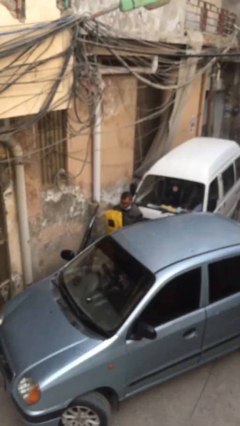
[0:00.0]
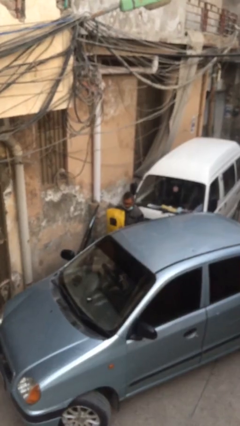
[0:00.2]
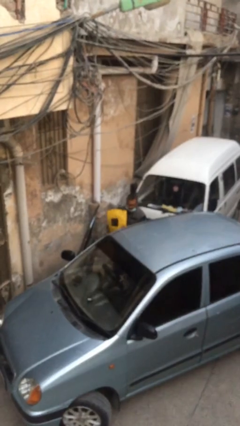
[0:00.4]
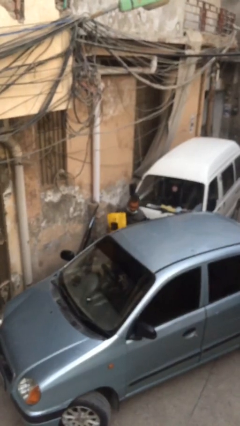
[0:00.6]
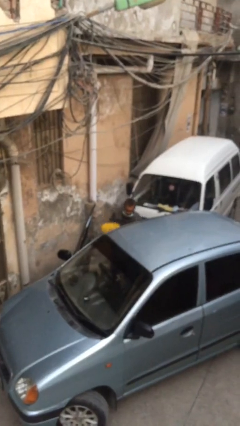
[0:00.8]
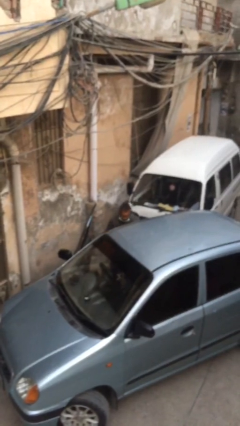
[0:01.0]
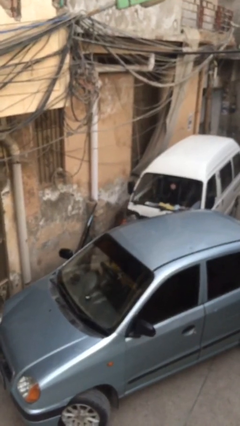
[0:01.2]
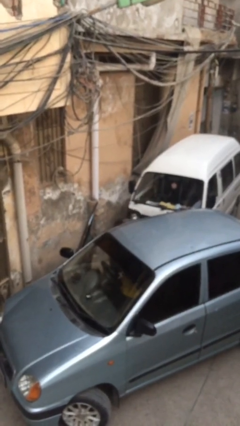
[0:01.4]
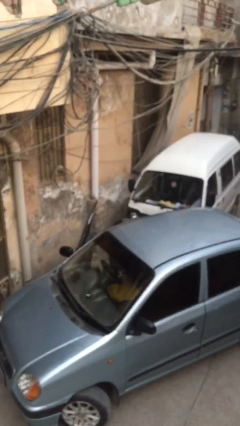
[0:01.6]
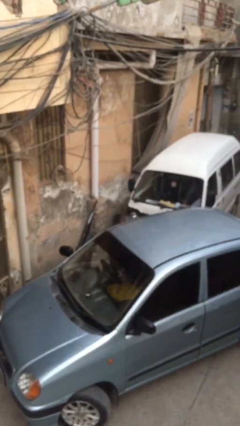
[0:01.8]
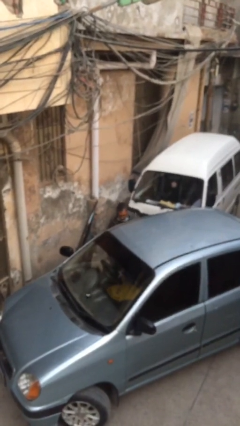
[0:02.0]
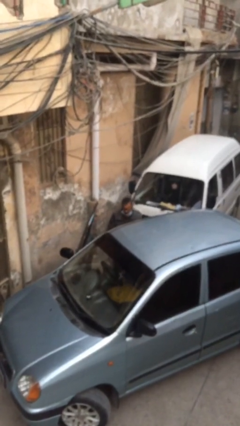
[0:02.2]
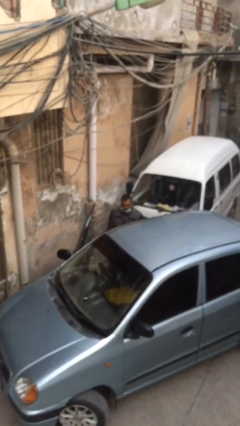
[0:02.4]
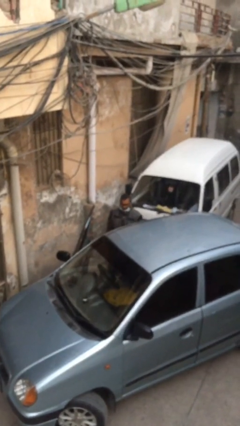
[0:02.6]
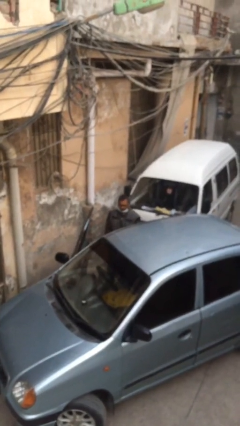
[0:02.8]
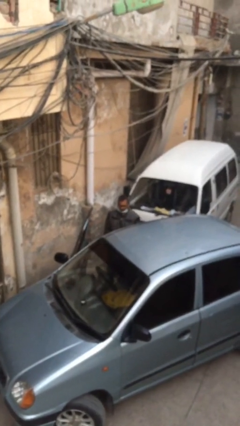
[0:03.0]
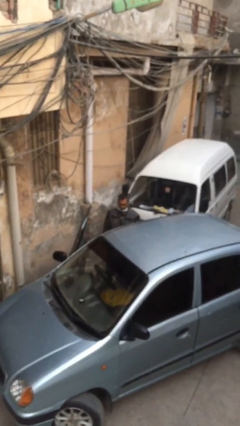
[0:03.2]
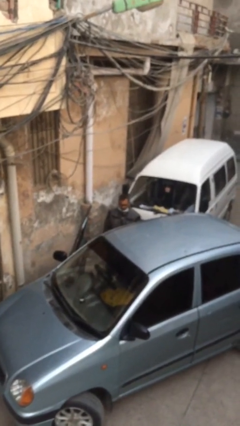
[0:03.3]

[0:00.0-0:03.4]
person loads car

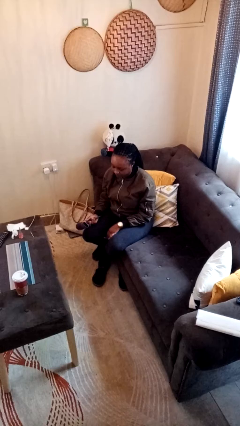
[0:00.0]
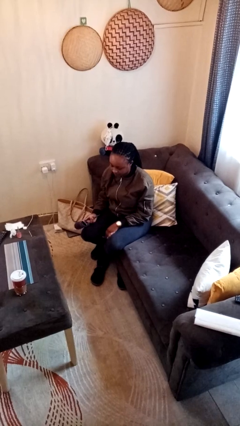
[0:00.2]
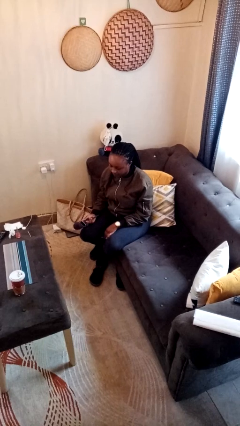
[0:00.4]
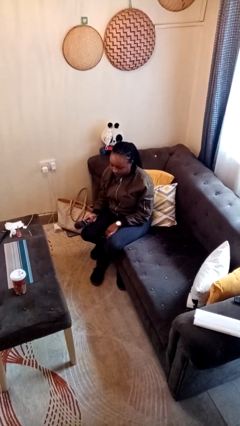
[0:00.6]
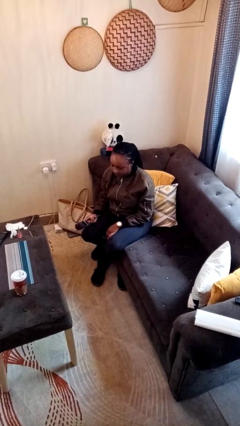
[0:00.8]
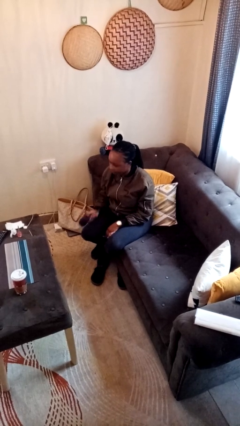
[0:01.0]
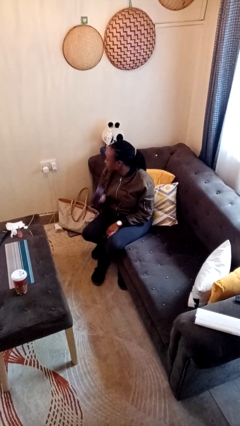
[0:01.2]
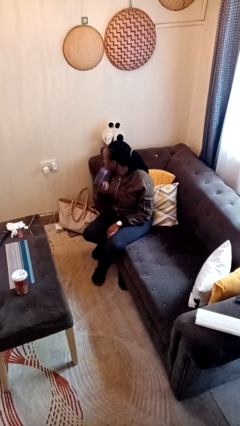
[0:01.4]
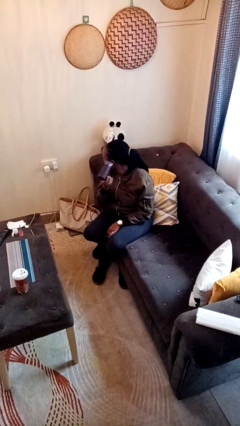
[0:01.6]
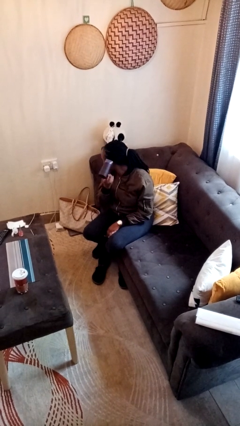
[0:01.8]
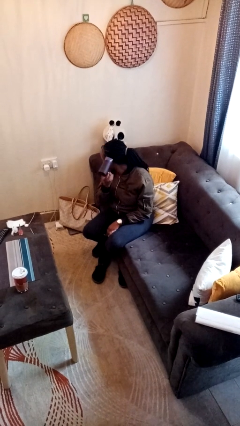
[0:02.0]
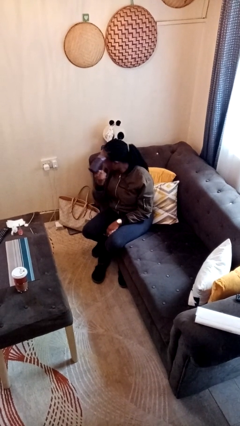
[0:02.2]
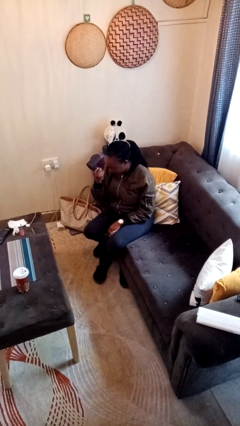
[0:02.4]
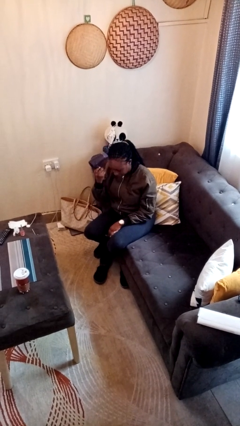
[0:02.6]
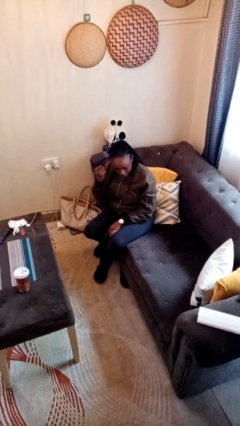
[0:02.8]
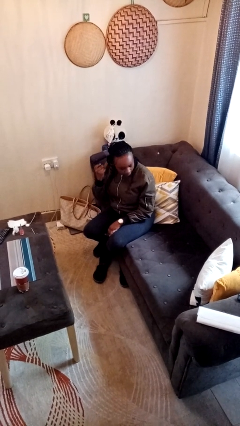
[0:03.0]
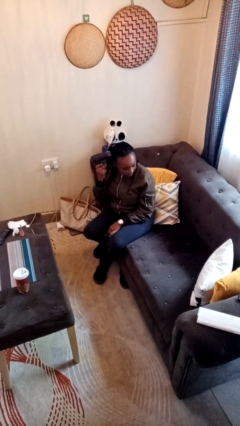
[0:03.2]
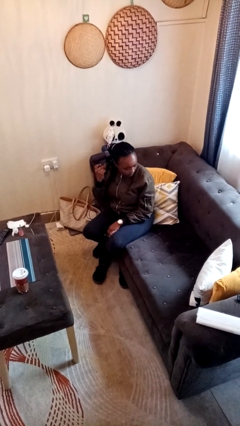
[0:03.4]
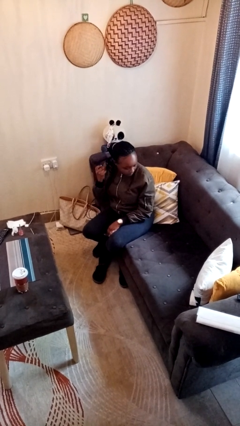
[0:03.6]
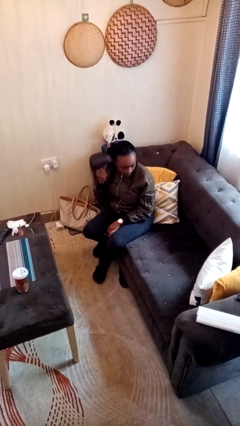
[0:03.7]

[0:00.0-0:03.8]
person dries hair with hairdryer

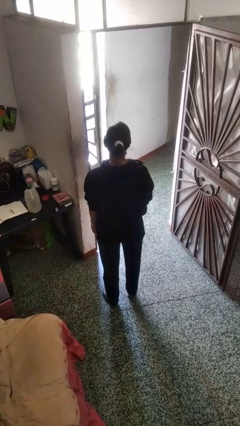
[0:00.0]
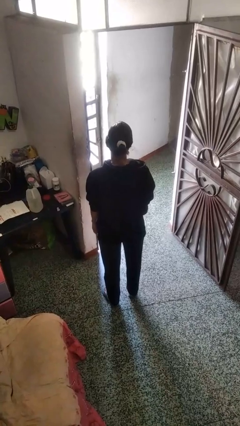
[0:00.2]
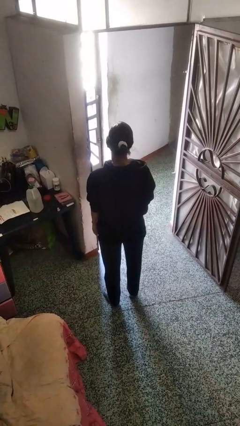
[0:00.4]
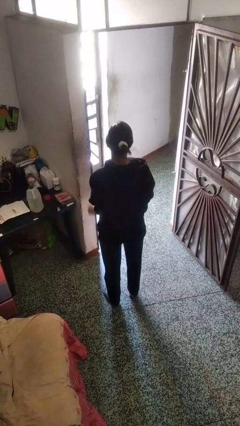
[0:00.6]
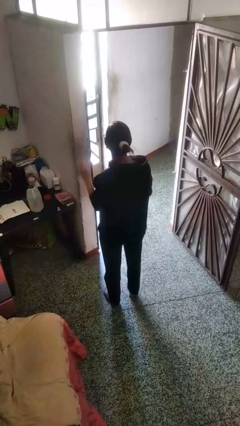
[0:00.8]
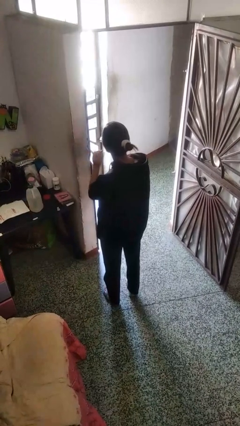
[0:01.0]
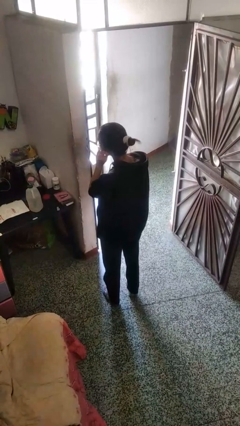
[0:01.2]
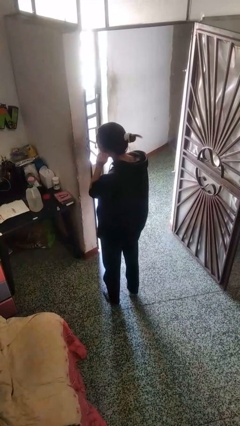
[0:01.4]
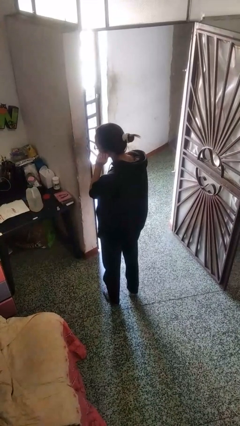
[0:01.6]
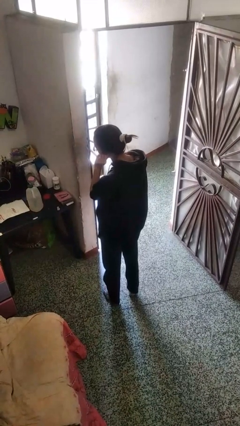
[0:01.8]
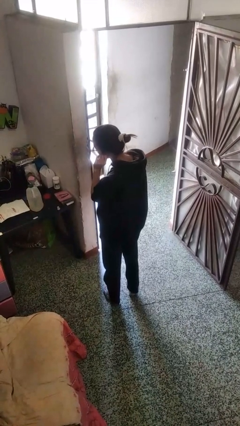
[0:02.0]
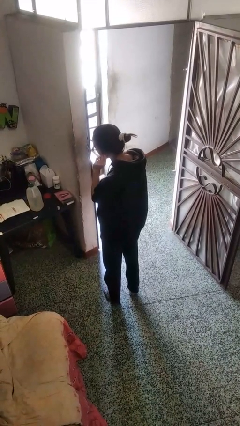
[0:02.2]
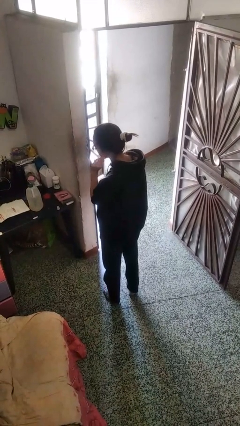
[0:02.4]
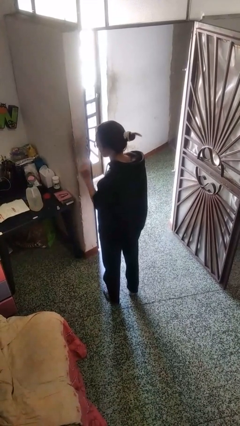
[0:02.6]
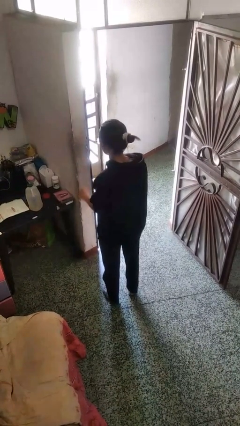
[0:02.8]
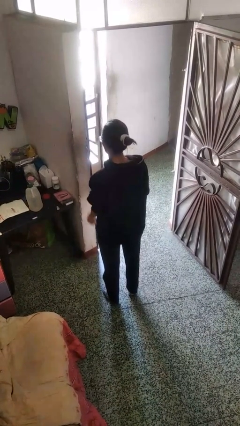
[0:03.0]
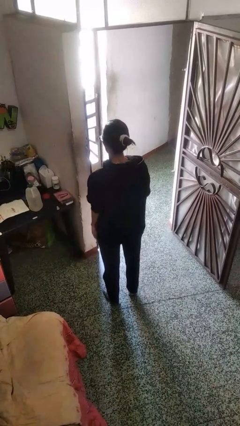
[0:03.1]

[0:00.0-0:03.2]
person touches earlobe

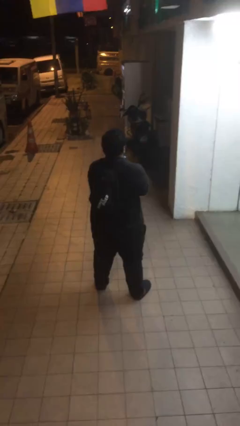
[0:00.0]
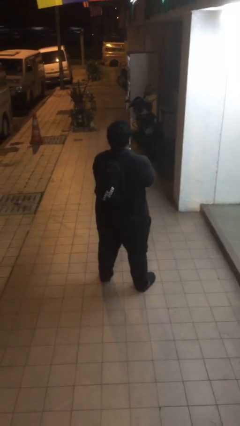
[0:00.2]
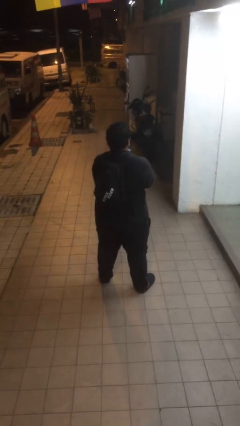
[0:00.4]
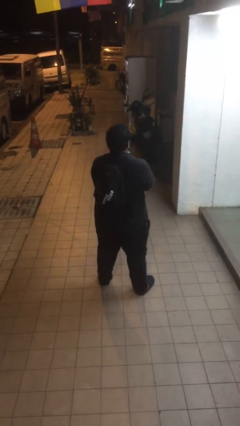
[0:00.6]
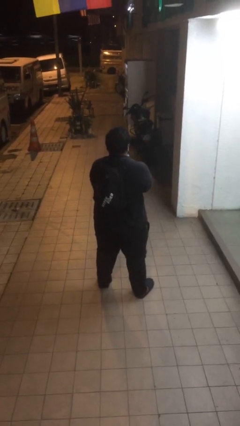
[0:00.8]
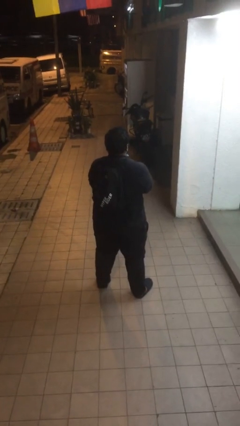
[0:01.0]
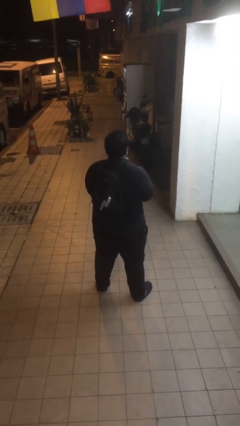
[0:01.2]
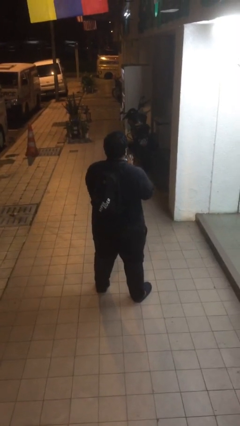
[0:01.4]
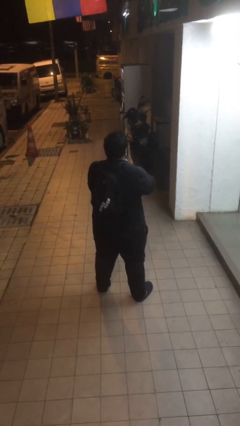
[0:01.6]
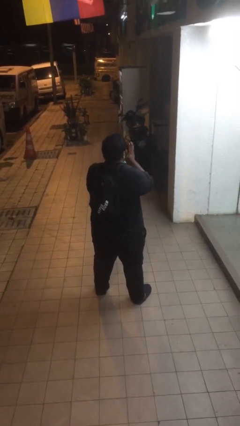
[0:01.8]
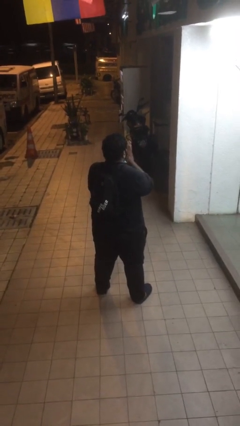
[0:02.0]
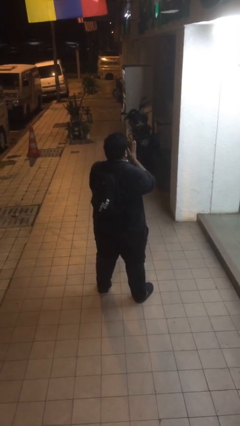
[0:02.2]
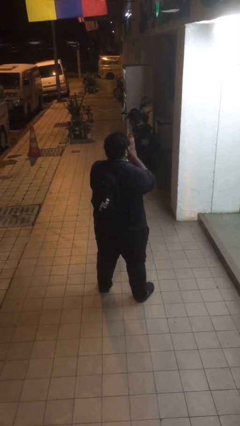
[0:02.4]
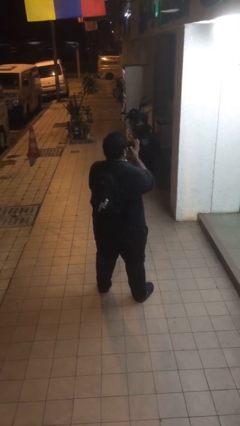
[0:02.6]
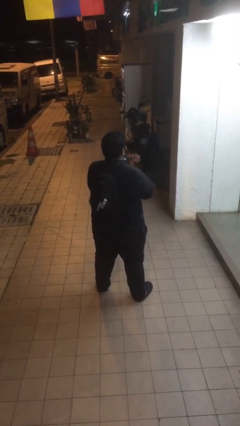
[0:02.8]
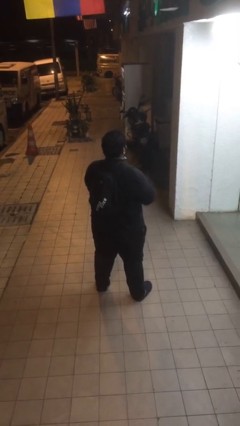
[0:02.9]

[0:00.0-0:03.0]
person blows into hands

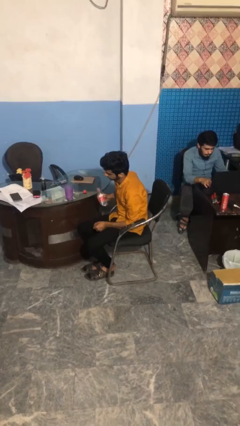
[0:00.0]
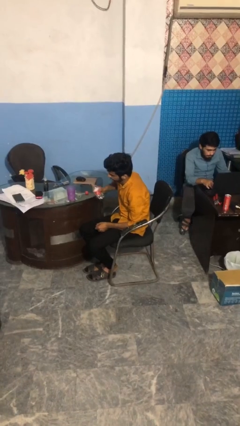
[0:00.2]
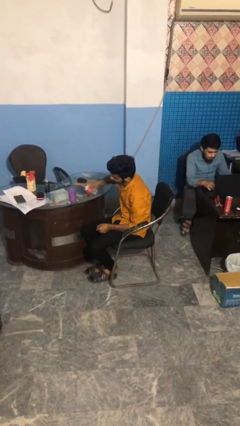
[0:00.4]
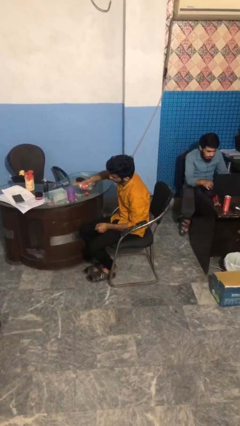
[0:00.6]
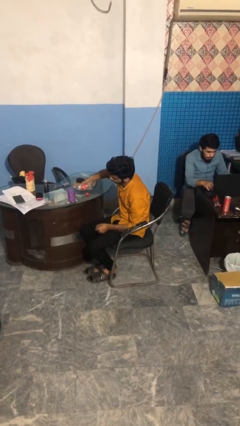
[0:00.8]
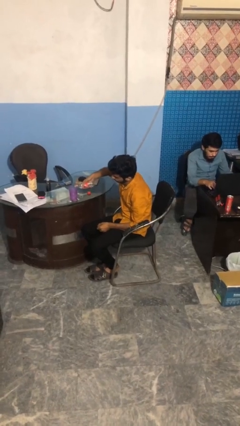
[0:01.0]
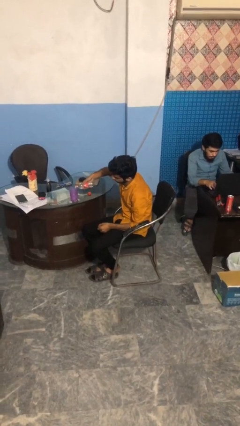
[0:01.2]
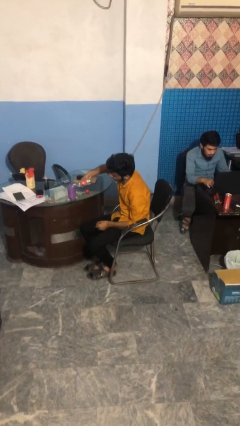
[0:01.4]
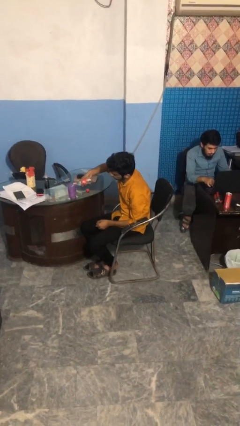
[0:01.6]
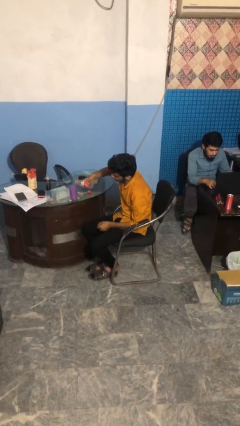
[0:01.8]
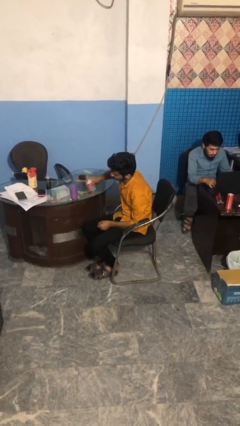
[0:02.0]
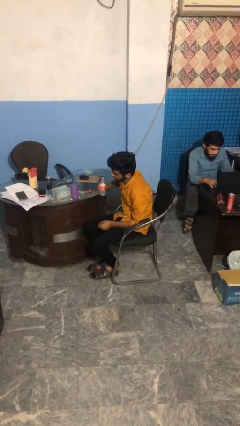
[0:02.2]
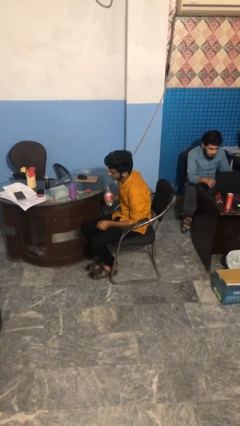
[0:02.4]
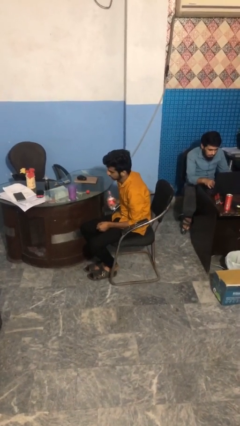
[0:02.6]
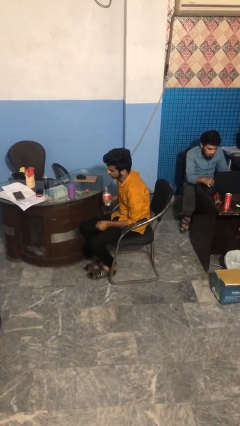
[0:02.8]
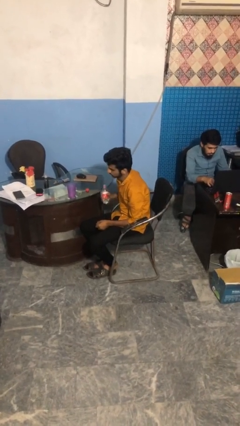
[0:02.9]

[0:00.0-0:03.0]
person pours liquid into cup

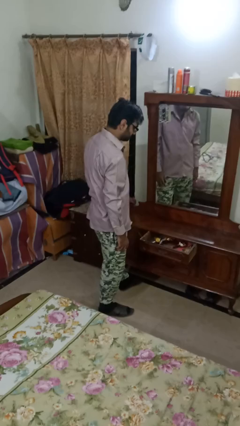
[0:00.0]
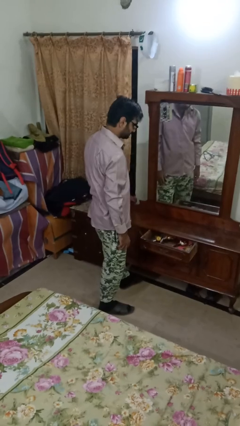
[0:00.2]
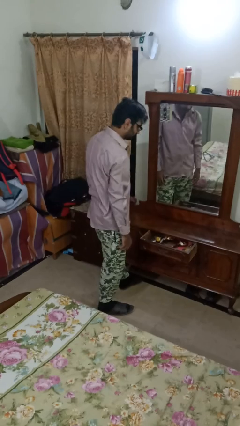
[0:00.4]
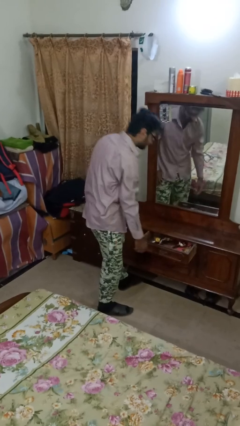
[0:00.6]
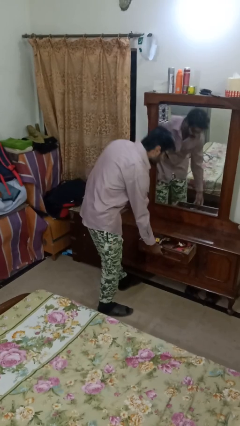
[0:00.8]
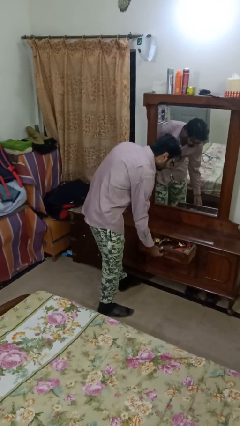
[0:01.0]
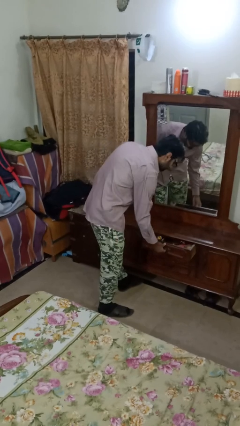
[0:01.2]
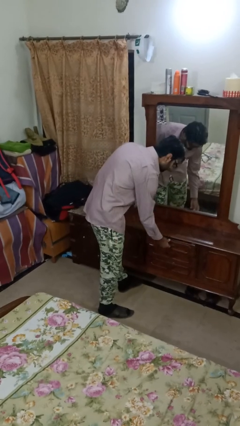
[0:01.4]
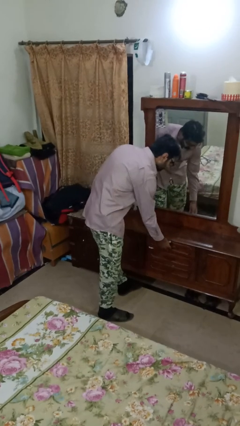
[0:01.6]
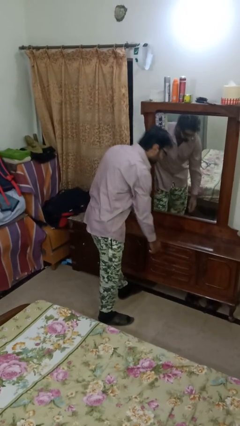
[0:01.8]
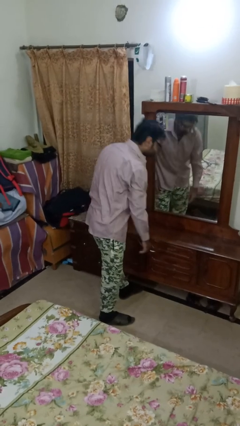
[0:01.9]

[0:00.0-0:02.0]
person closes dresser drawer
